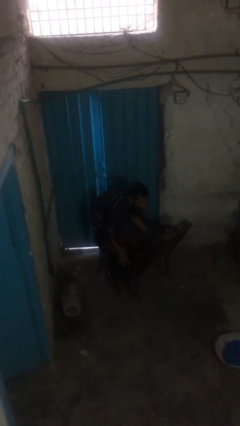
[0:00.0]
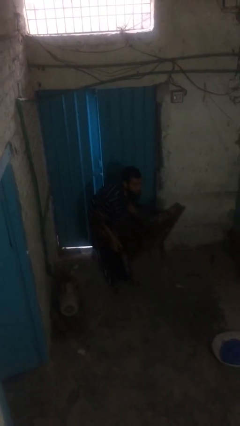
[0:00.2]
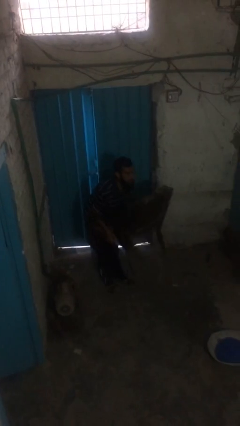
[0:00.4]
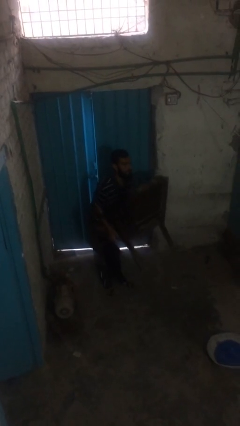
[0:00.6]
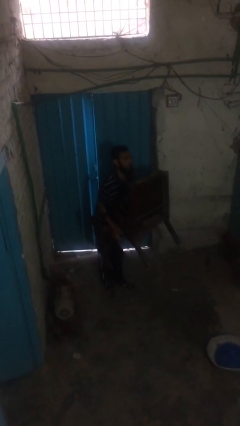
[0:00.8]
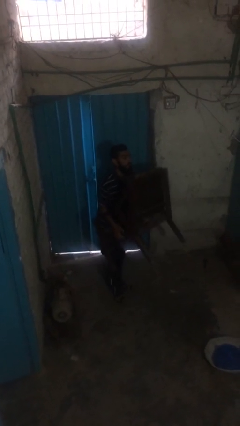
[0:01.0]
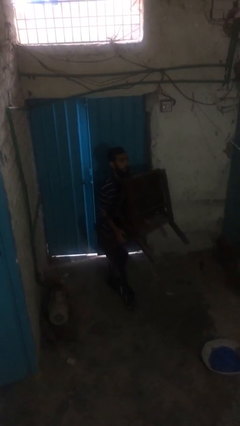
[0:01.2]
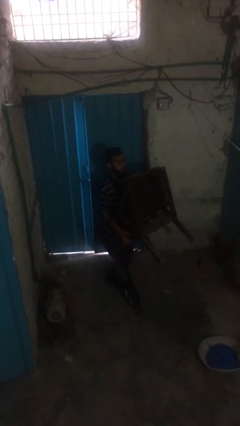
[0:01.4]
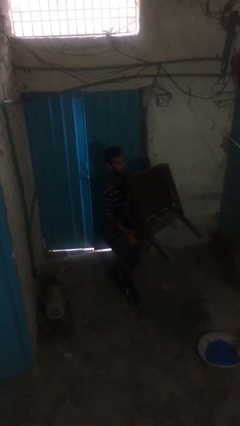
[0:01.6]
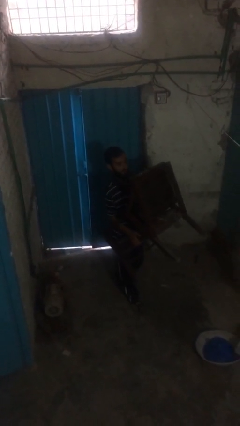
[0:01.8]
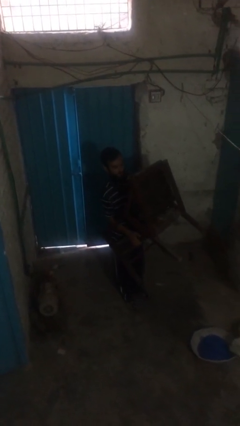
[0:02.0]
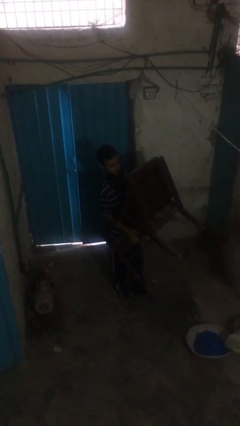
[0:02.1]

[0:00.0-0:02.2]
person carries heavy object

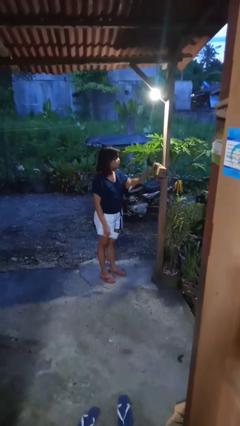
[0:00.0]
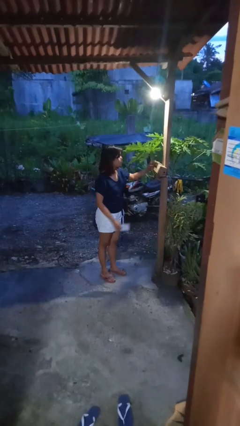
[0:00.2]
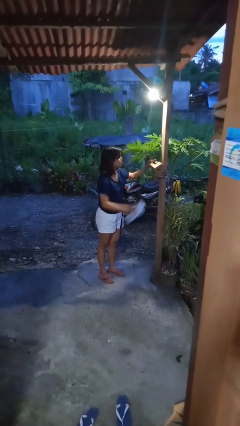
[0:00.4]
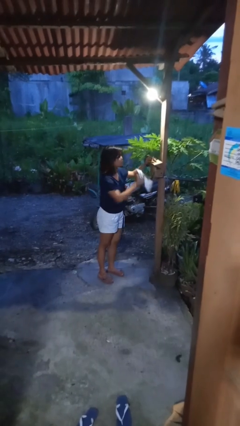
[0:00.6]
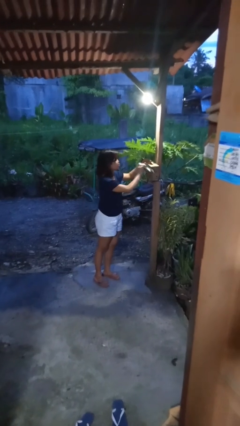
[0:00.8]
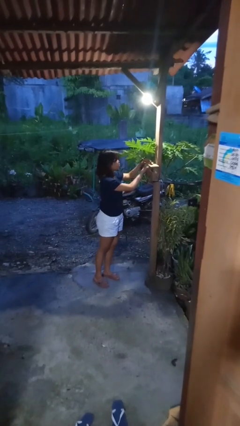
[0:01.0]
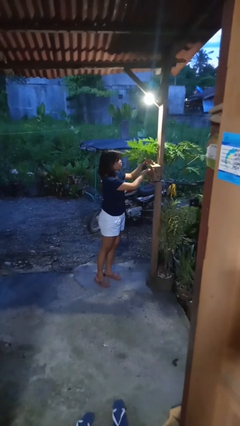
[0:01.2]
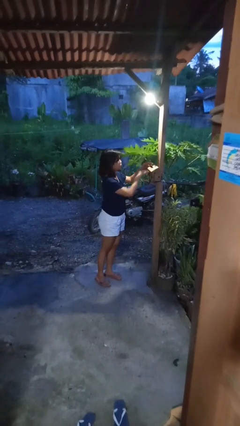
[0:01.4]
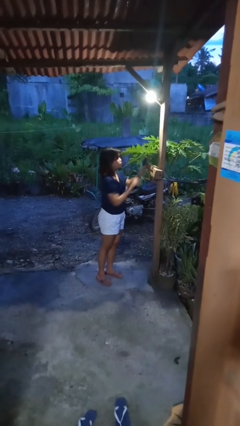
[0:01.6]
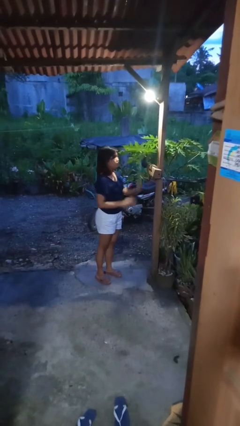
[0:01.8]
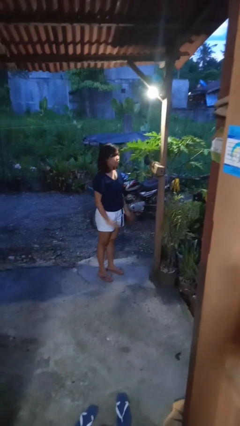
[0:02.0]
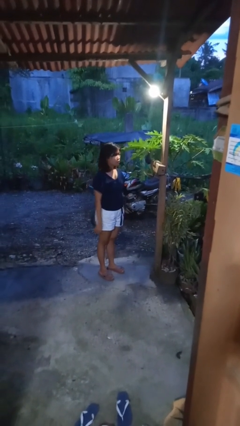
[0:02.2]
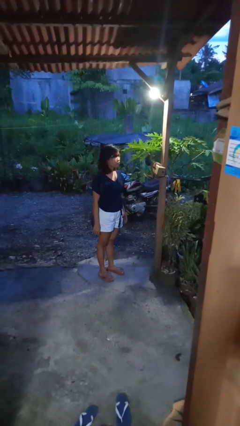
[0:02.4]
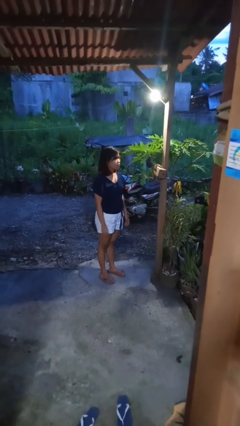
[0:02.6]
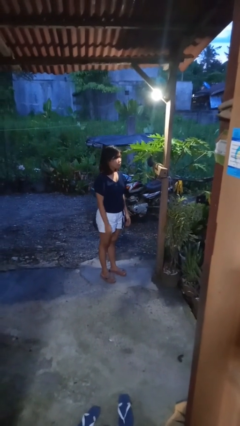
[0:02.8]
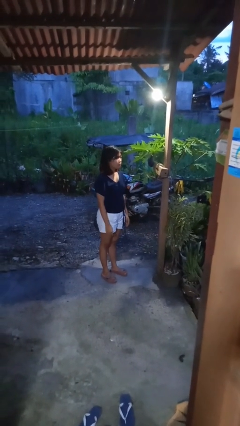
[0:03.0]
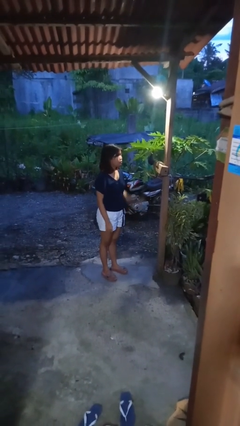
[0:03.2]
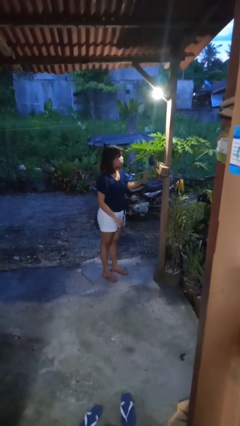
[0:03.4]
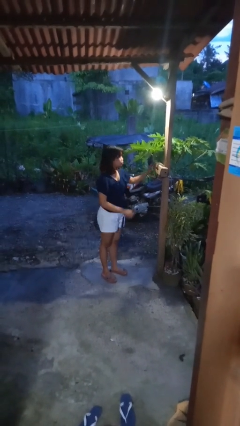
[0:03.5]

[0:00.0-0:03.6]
person puts letters in mailbox

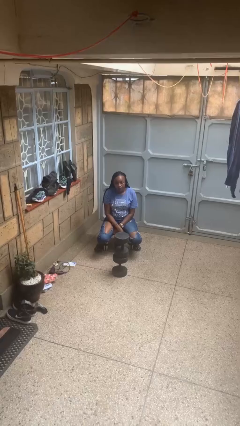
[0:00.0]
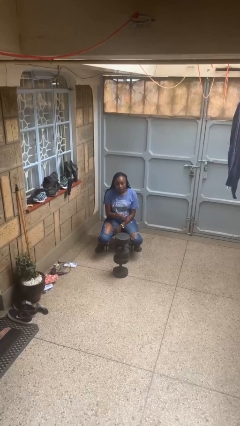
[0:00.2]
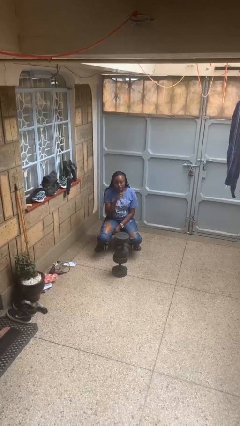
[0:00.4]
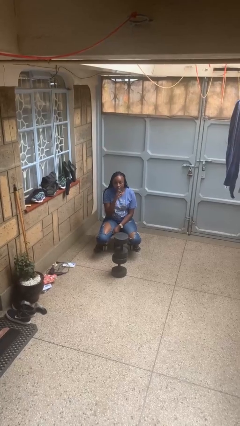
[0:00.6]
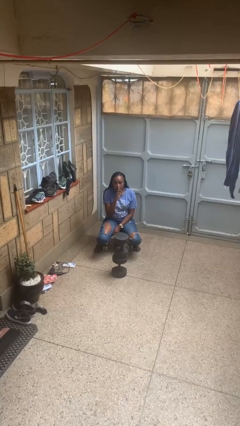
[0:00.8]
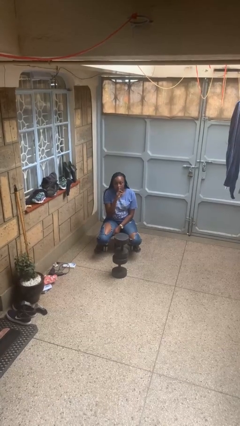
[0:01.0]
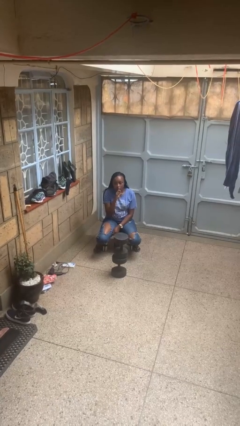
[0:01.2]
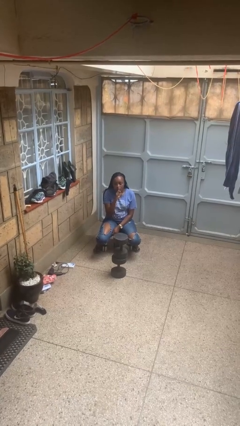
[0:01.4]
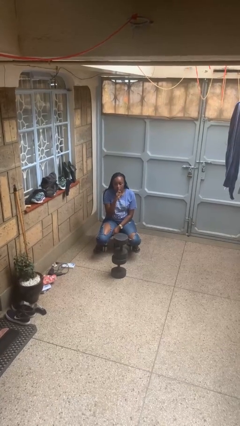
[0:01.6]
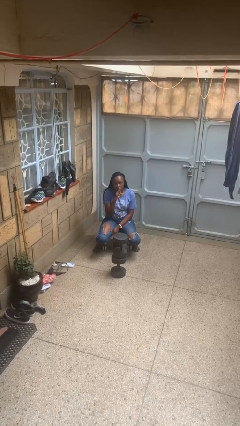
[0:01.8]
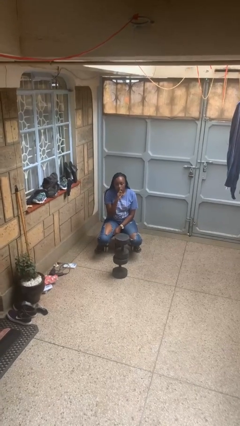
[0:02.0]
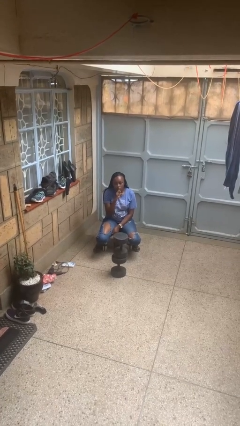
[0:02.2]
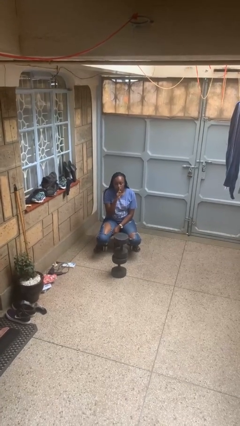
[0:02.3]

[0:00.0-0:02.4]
person gestures be quiet

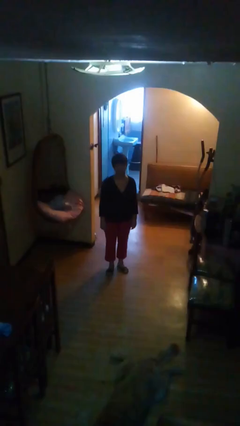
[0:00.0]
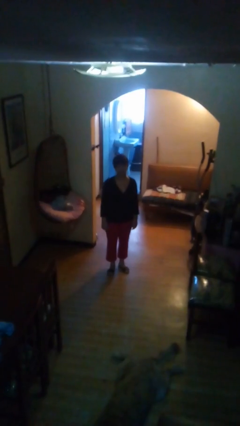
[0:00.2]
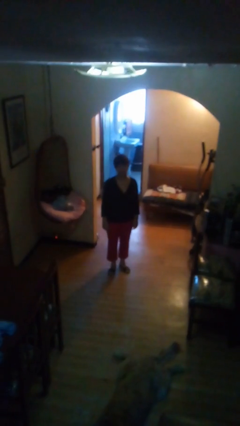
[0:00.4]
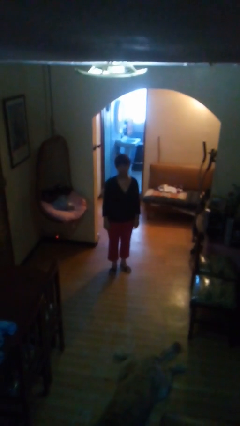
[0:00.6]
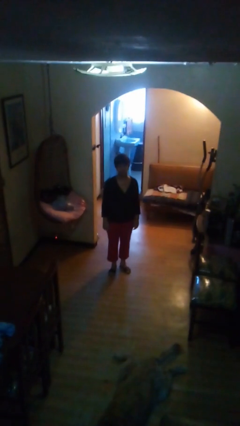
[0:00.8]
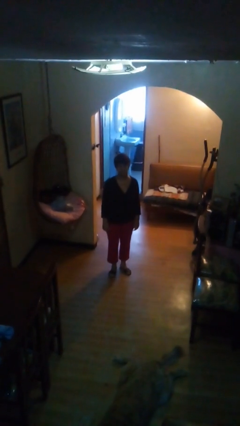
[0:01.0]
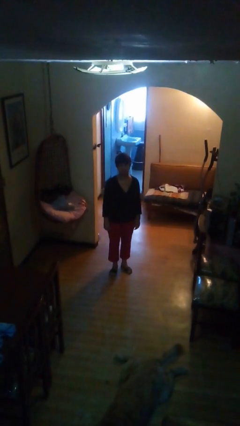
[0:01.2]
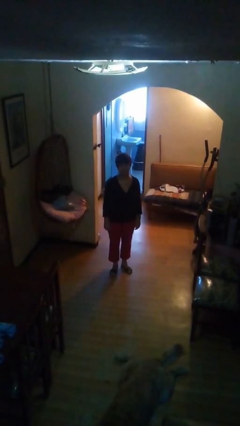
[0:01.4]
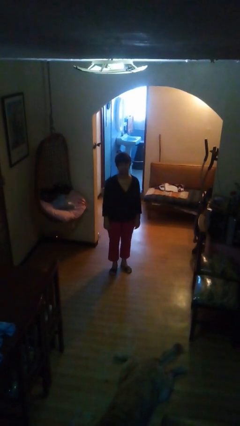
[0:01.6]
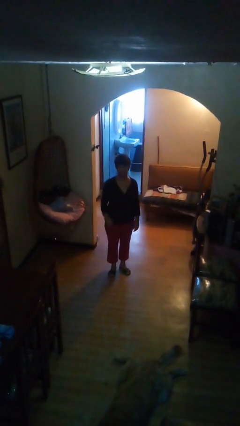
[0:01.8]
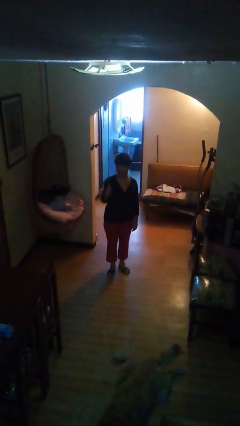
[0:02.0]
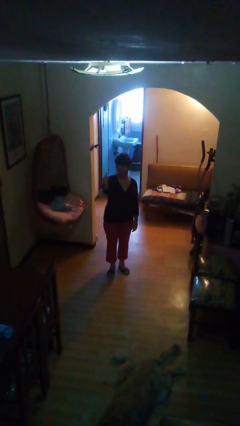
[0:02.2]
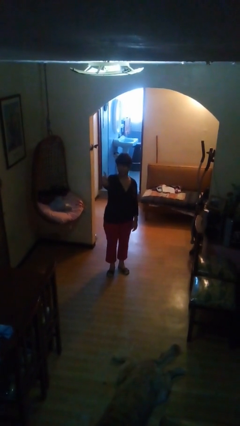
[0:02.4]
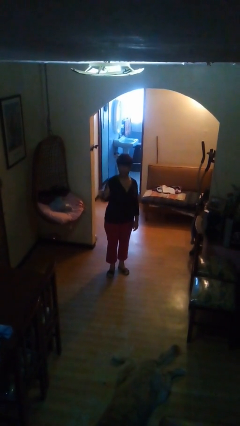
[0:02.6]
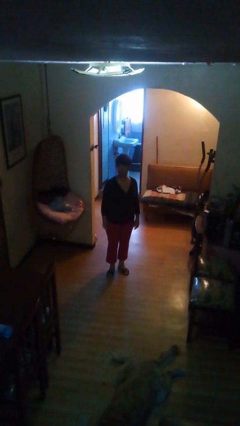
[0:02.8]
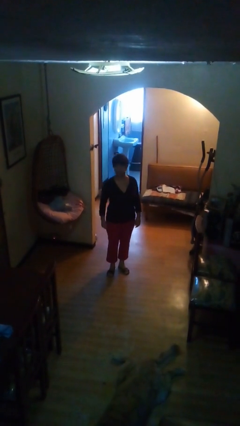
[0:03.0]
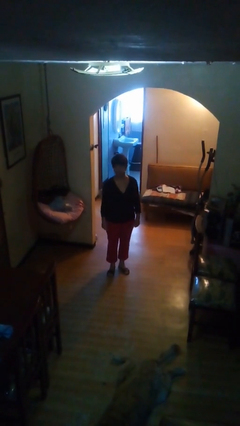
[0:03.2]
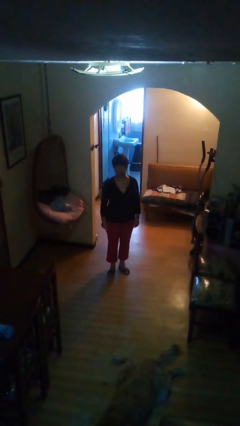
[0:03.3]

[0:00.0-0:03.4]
person gestures thumbs up

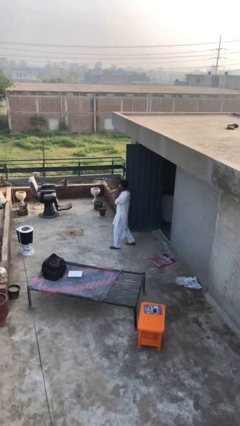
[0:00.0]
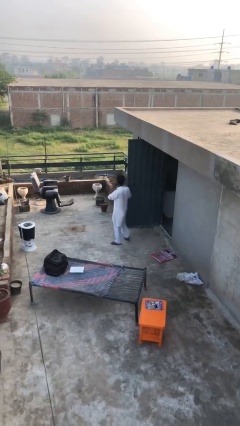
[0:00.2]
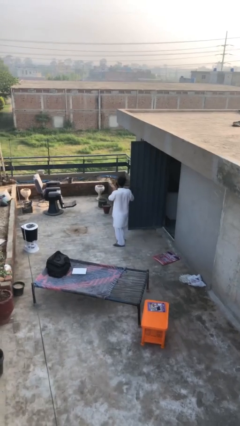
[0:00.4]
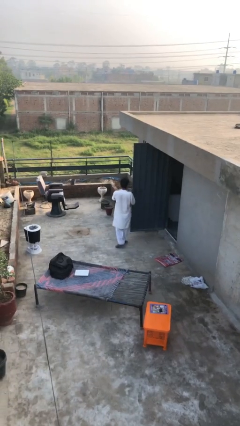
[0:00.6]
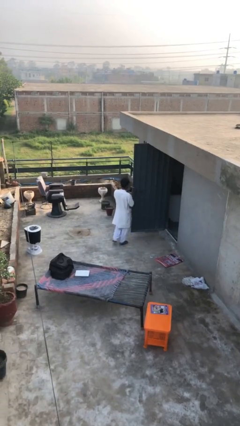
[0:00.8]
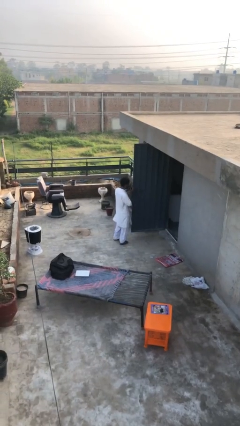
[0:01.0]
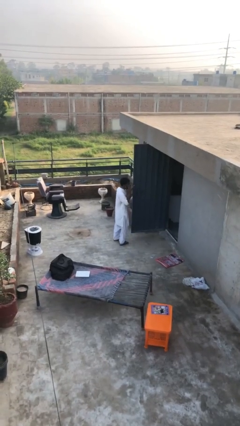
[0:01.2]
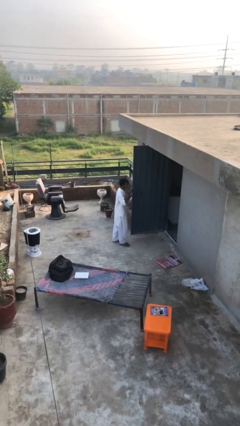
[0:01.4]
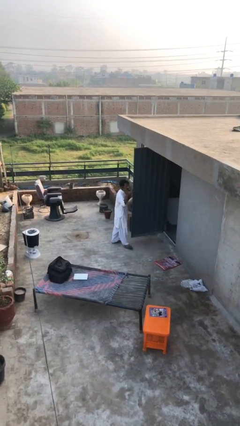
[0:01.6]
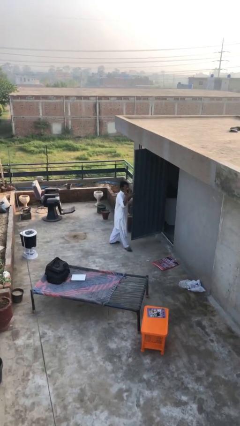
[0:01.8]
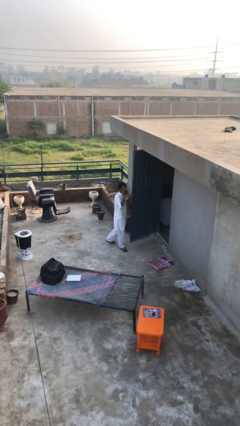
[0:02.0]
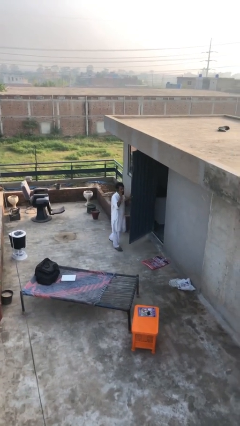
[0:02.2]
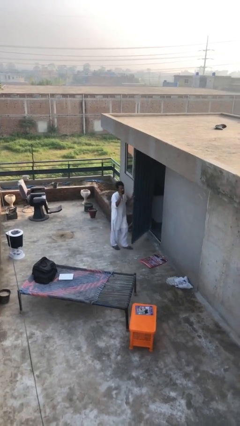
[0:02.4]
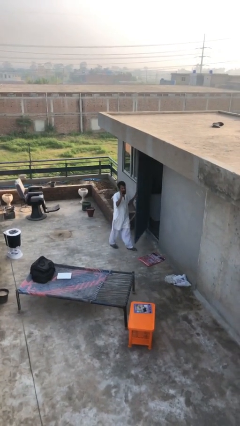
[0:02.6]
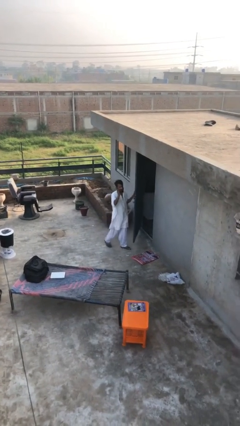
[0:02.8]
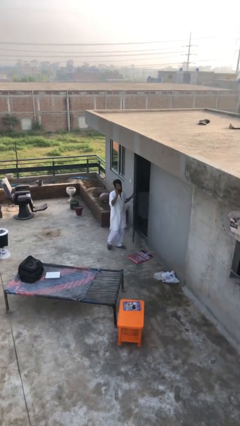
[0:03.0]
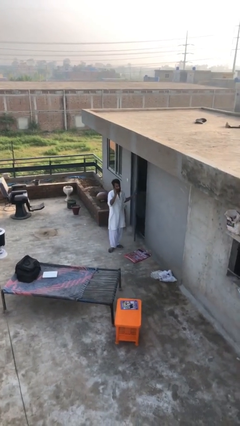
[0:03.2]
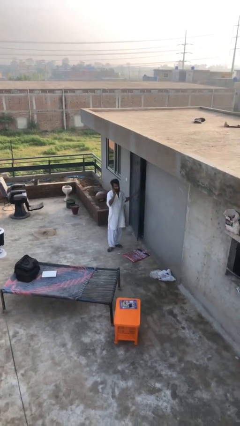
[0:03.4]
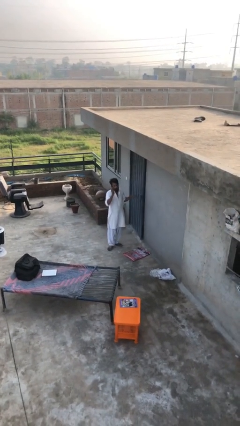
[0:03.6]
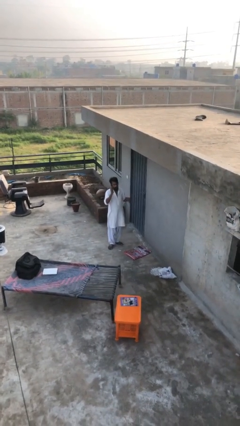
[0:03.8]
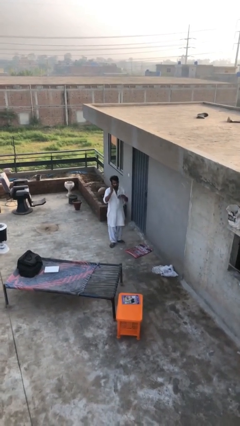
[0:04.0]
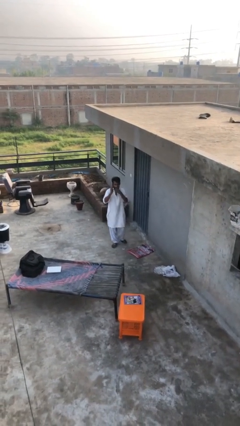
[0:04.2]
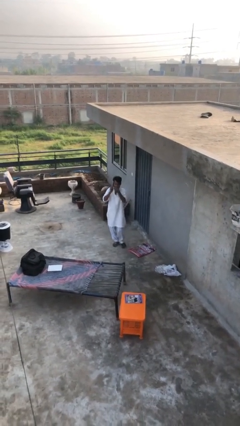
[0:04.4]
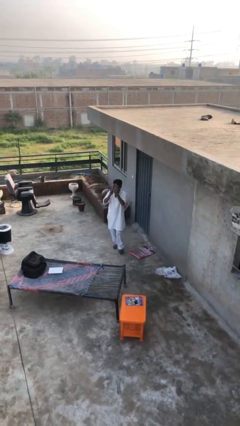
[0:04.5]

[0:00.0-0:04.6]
person closes facility door

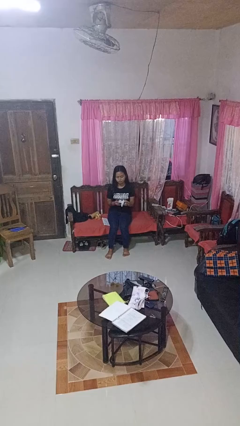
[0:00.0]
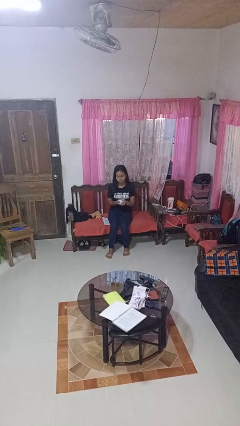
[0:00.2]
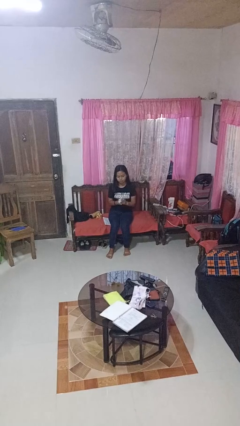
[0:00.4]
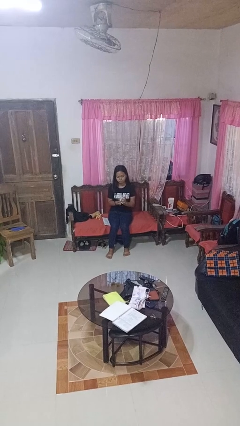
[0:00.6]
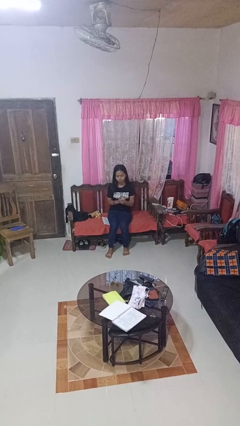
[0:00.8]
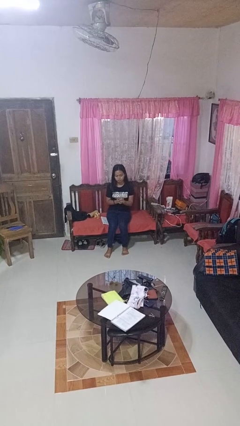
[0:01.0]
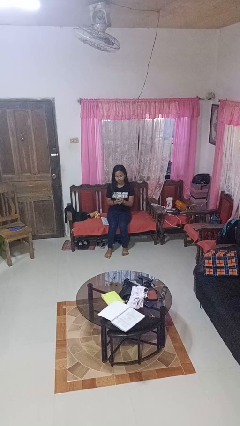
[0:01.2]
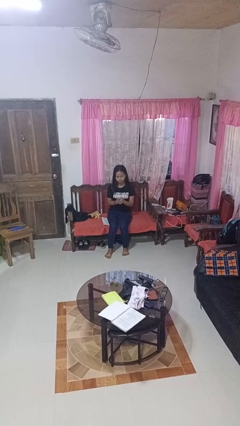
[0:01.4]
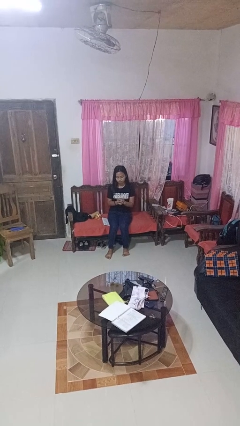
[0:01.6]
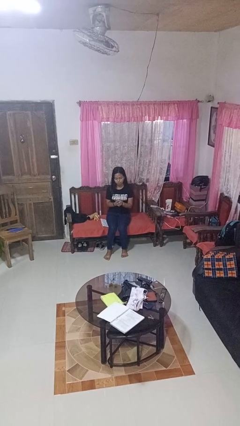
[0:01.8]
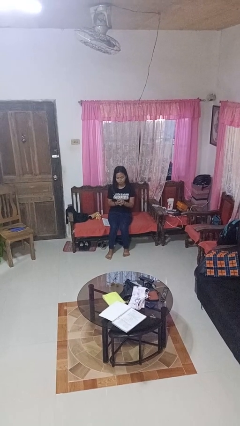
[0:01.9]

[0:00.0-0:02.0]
person crumples paper
